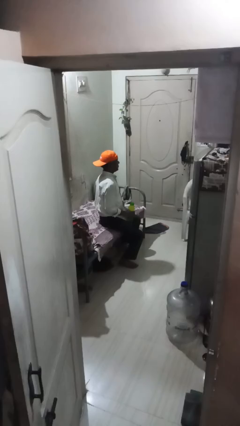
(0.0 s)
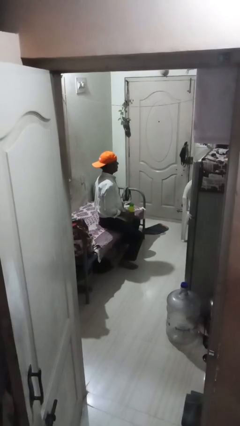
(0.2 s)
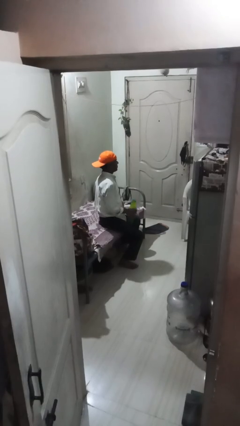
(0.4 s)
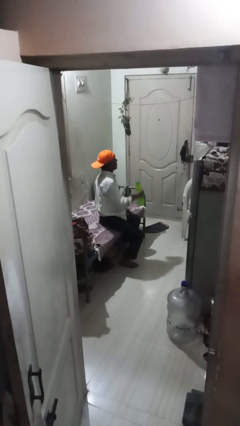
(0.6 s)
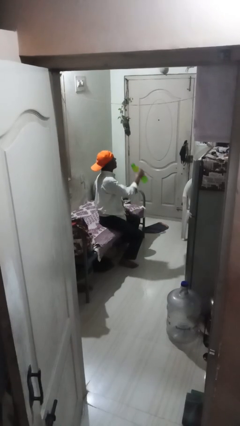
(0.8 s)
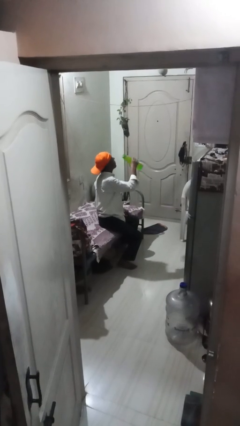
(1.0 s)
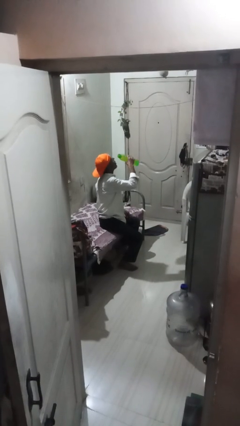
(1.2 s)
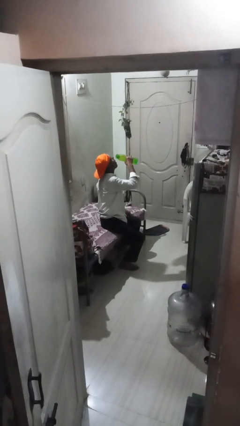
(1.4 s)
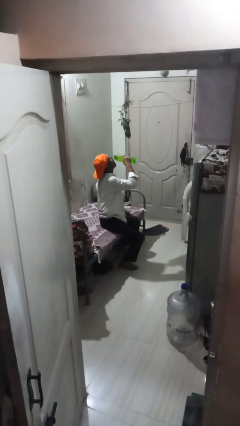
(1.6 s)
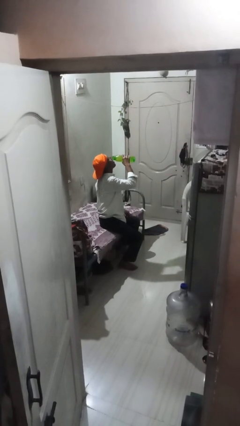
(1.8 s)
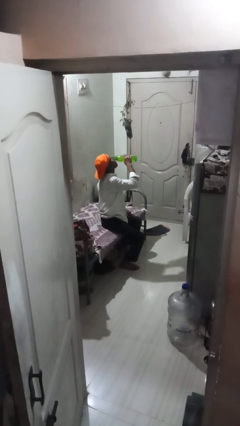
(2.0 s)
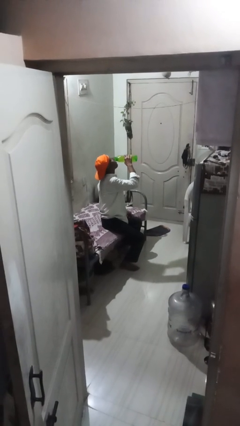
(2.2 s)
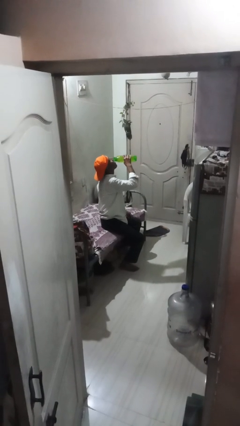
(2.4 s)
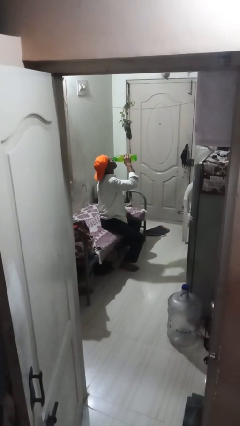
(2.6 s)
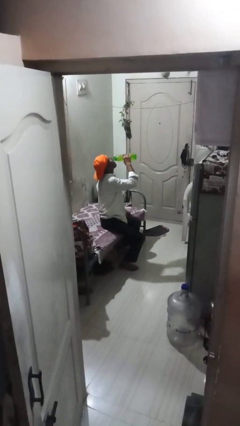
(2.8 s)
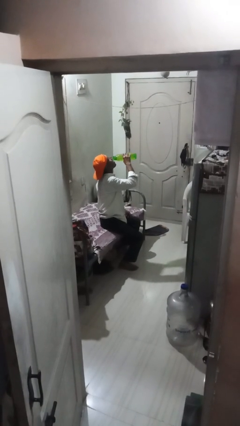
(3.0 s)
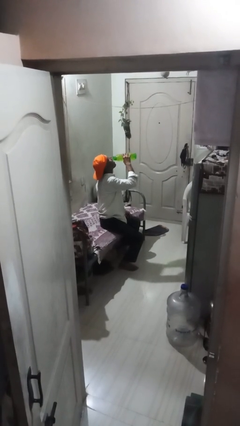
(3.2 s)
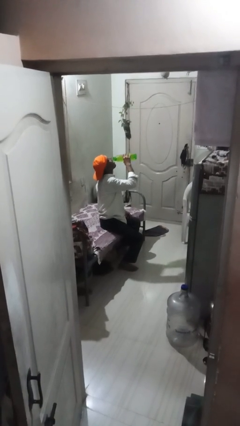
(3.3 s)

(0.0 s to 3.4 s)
person drinks from bottle

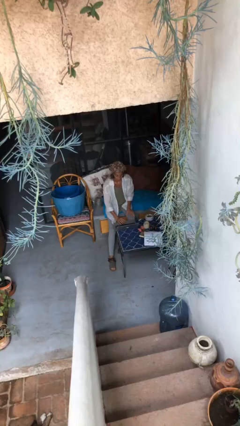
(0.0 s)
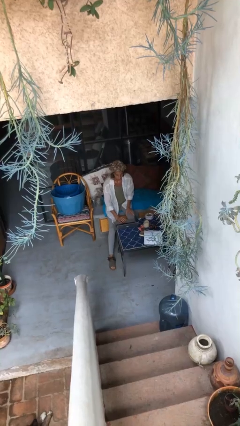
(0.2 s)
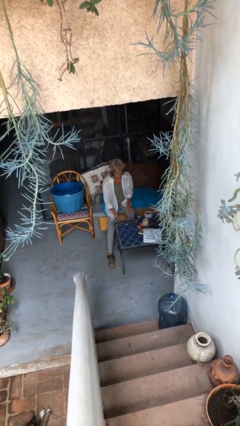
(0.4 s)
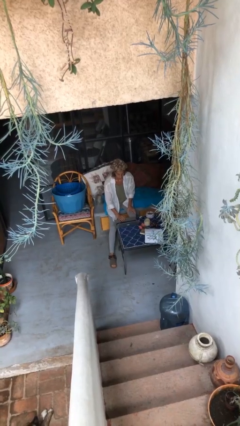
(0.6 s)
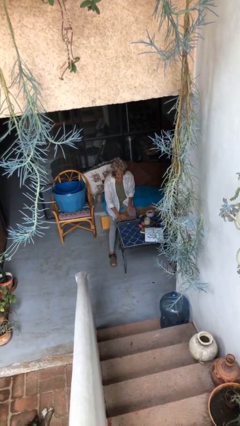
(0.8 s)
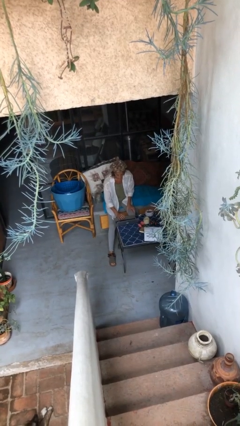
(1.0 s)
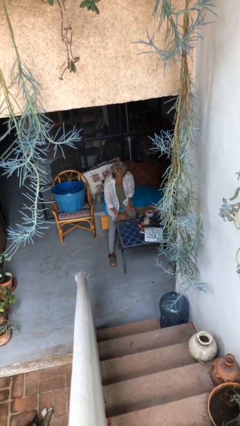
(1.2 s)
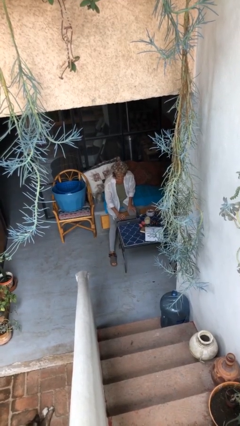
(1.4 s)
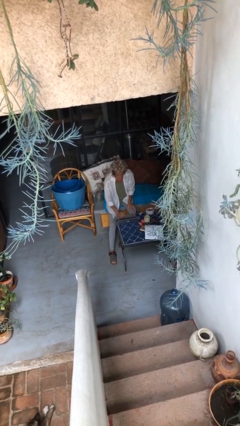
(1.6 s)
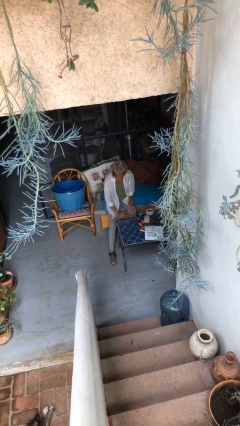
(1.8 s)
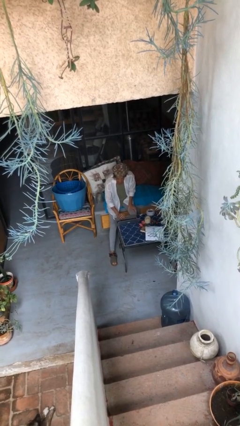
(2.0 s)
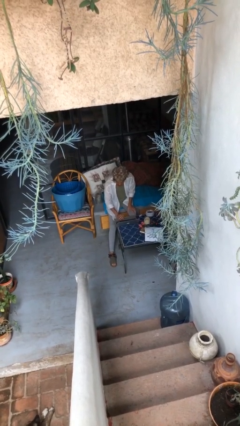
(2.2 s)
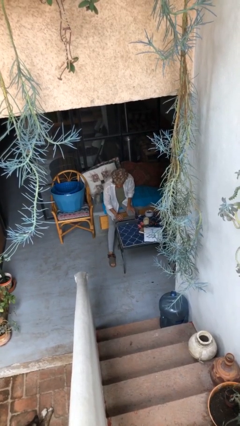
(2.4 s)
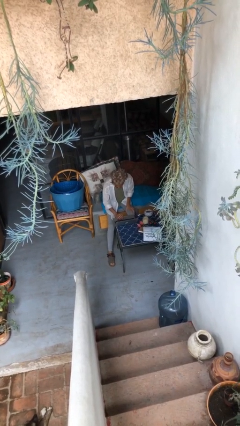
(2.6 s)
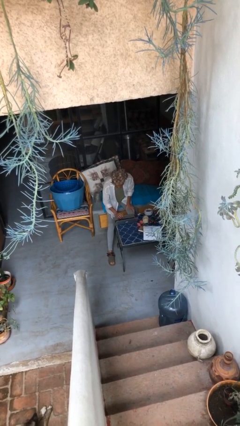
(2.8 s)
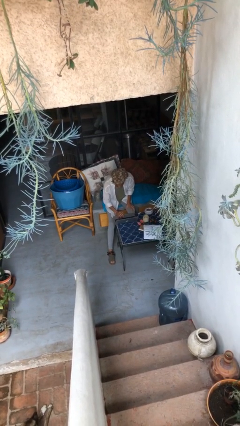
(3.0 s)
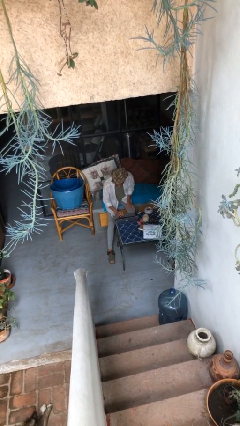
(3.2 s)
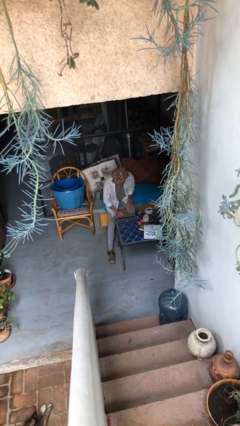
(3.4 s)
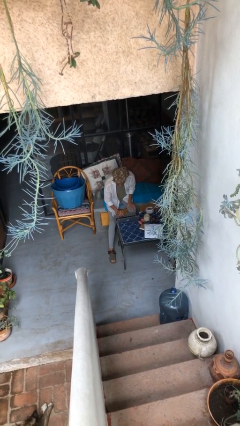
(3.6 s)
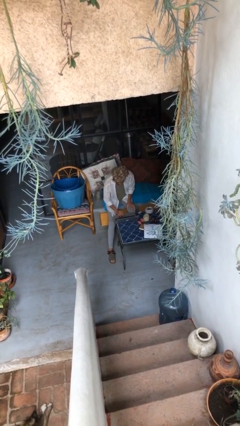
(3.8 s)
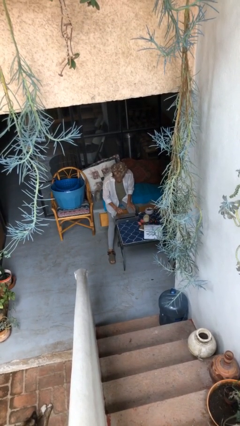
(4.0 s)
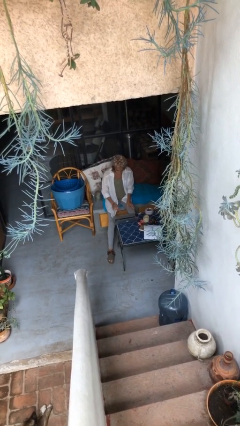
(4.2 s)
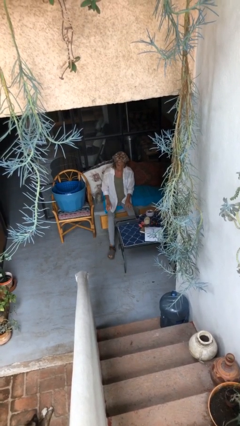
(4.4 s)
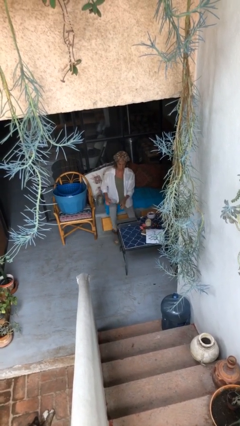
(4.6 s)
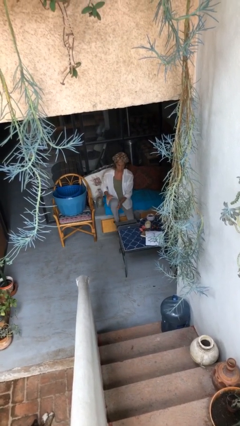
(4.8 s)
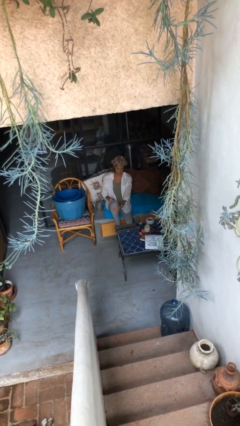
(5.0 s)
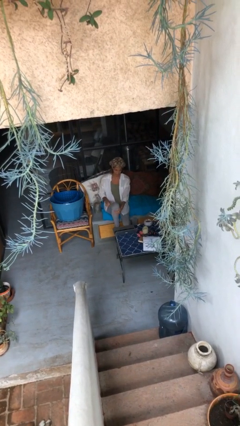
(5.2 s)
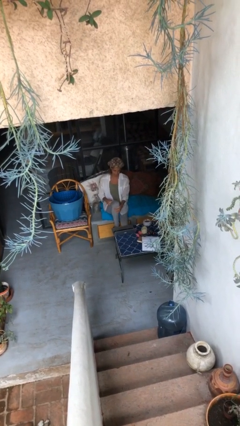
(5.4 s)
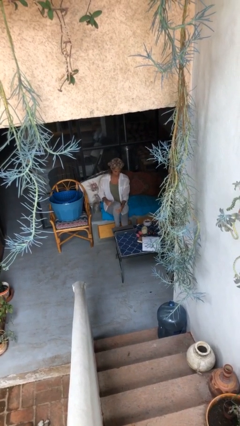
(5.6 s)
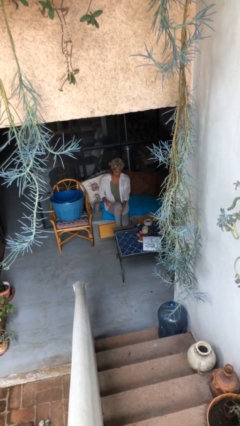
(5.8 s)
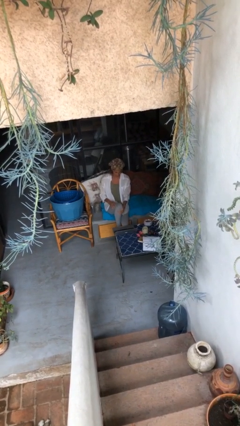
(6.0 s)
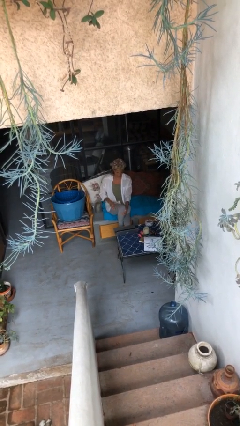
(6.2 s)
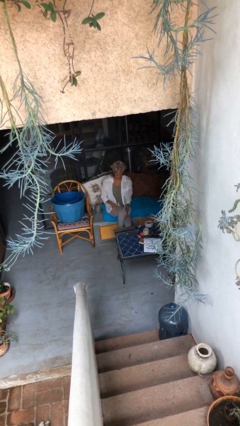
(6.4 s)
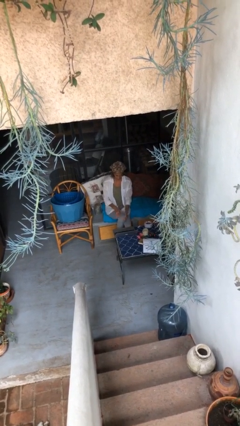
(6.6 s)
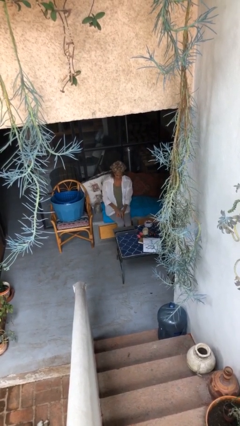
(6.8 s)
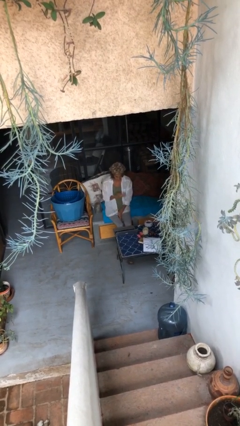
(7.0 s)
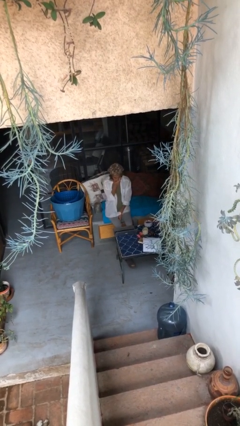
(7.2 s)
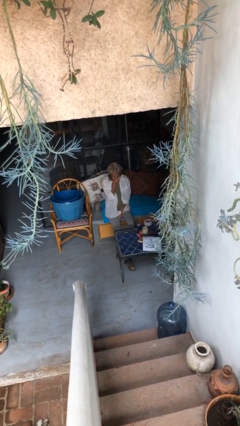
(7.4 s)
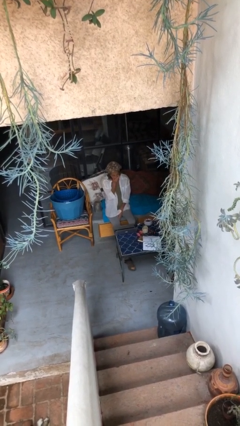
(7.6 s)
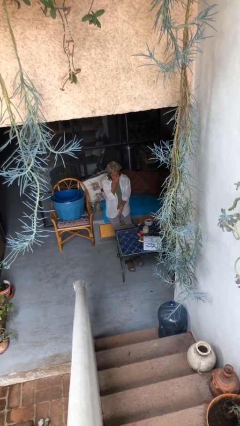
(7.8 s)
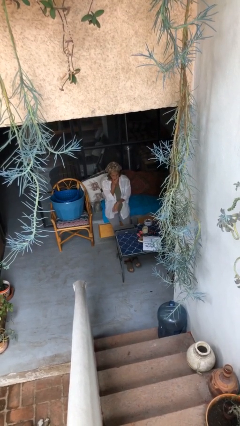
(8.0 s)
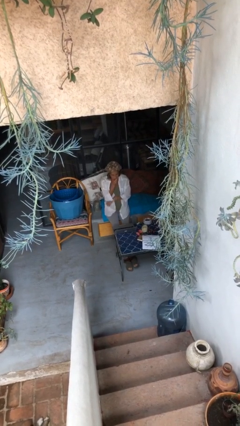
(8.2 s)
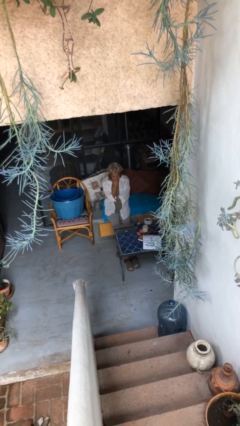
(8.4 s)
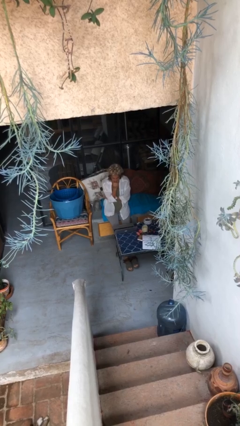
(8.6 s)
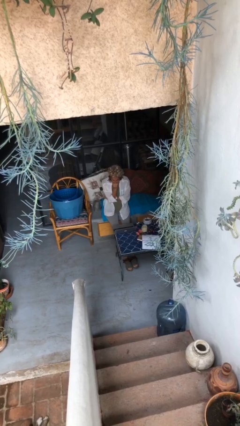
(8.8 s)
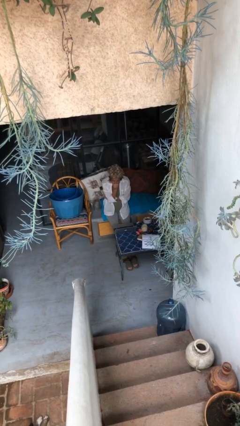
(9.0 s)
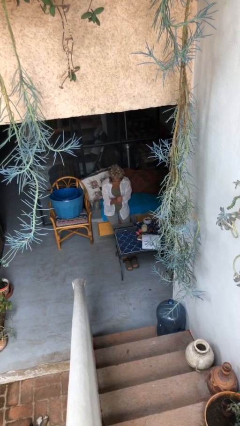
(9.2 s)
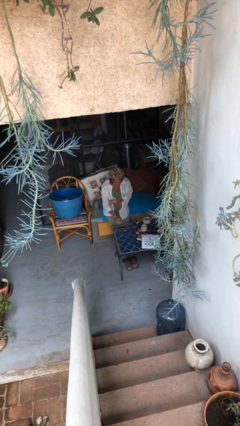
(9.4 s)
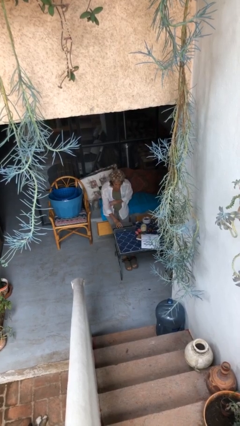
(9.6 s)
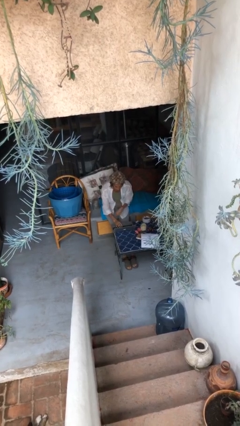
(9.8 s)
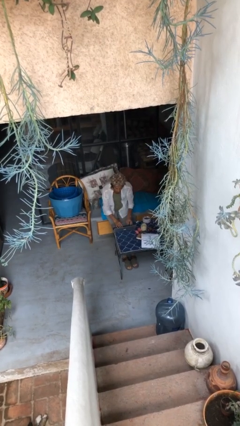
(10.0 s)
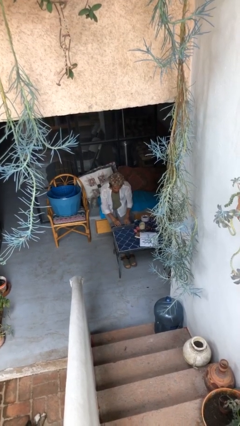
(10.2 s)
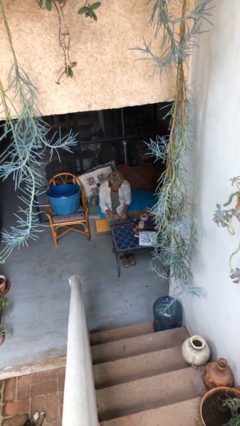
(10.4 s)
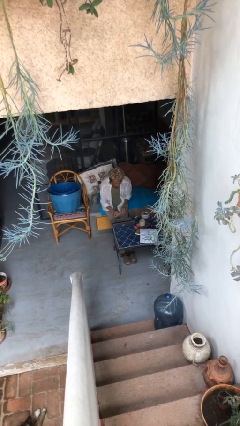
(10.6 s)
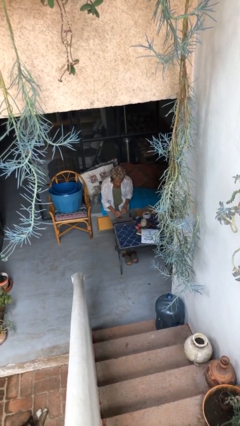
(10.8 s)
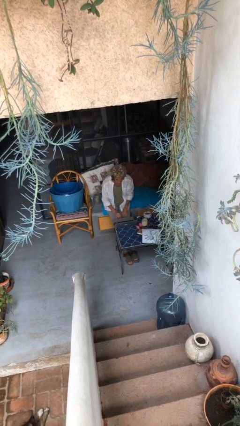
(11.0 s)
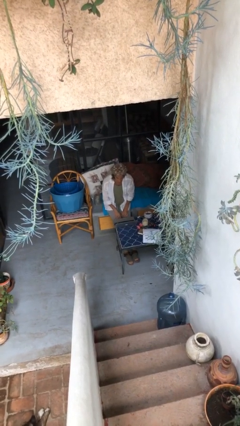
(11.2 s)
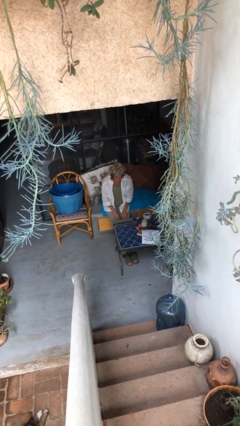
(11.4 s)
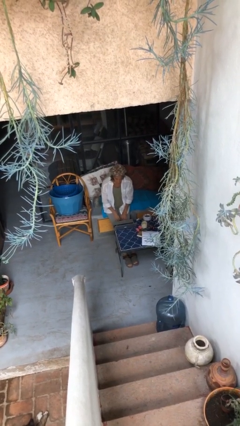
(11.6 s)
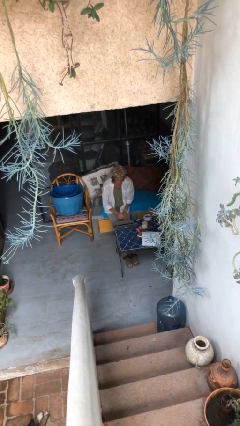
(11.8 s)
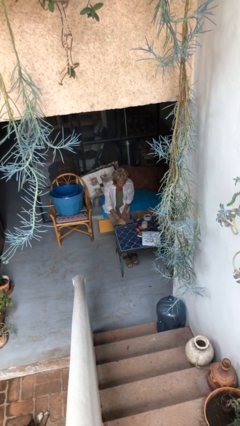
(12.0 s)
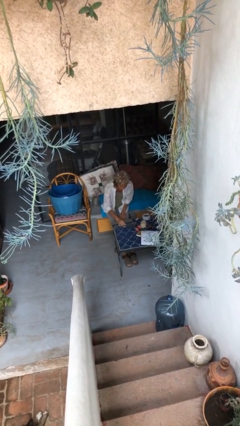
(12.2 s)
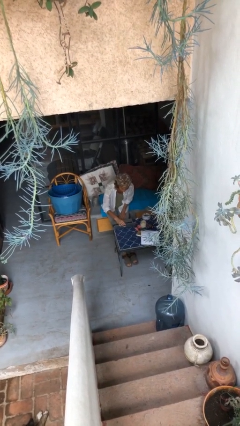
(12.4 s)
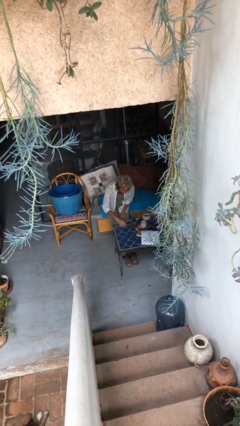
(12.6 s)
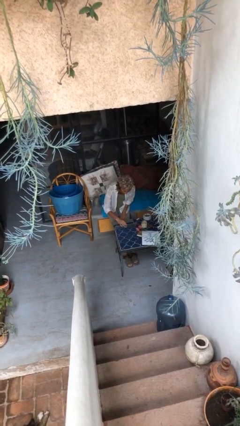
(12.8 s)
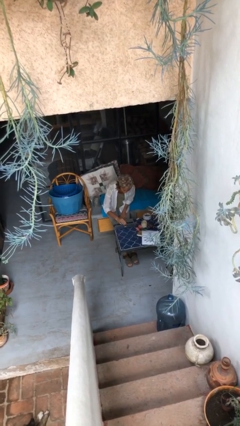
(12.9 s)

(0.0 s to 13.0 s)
person interacts with laptop

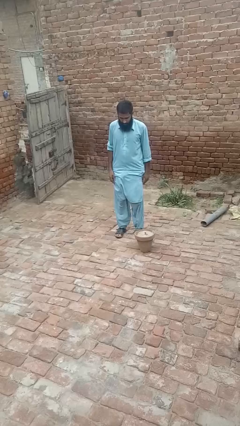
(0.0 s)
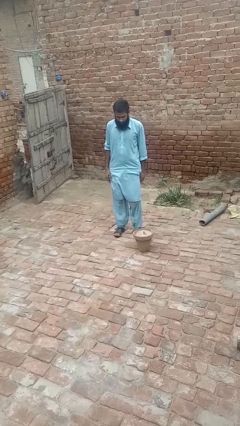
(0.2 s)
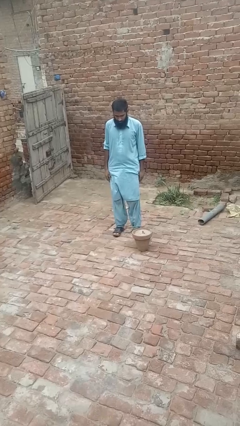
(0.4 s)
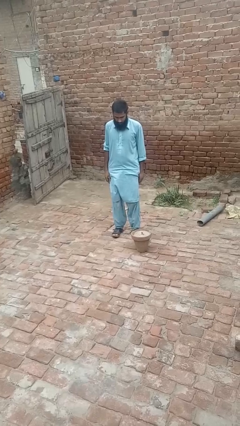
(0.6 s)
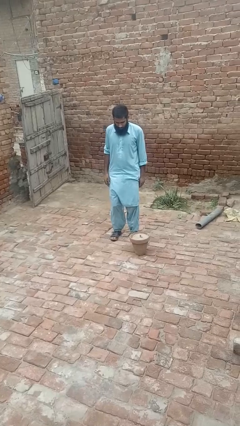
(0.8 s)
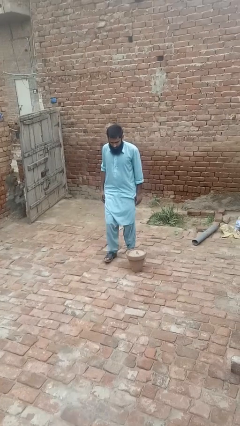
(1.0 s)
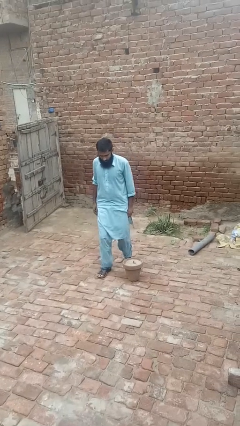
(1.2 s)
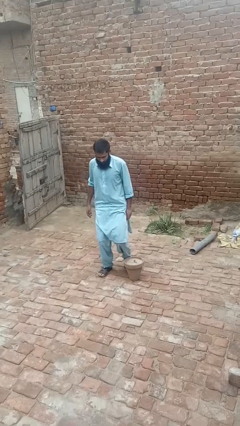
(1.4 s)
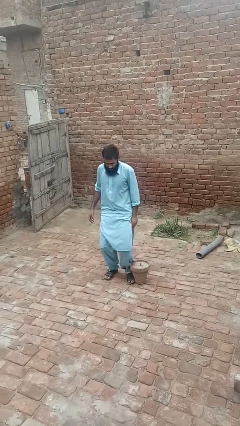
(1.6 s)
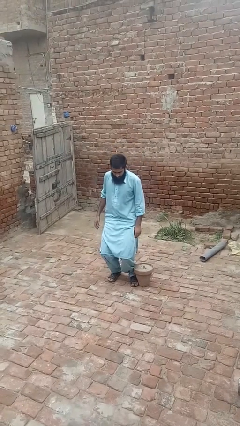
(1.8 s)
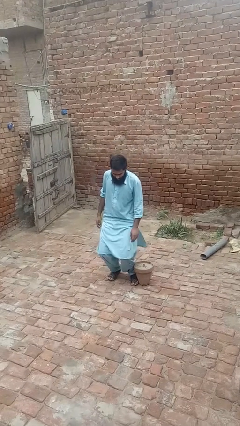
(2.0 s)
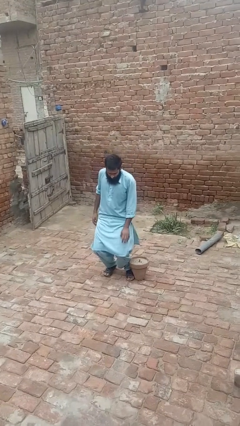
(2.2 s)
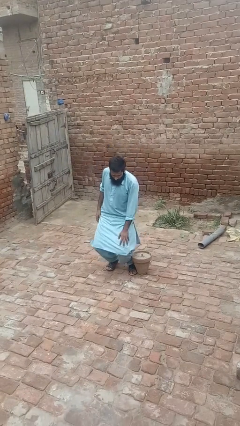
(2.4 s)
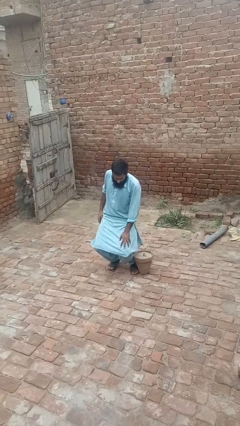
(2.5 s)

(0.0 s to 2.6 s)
person trips on object on floor
